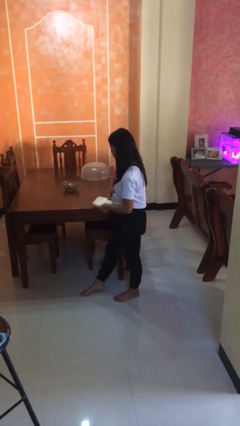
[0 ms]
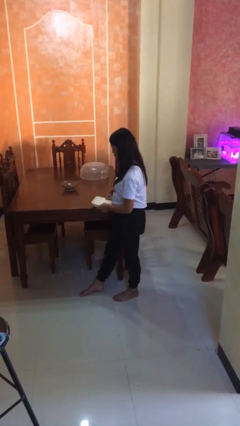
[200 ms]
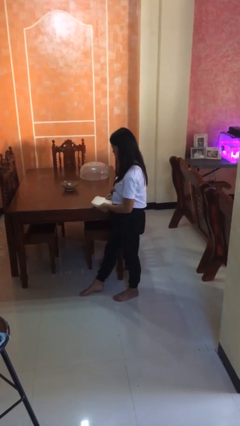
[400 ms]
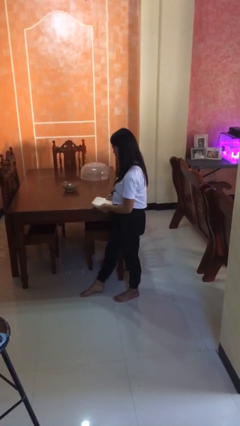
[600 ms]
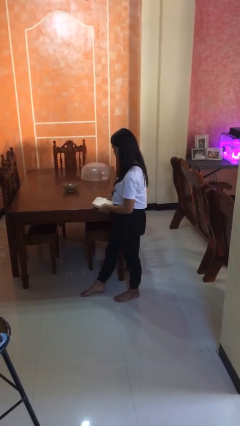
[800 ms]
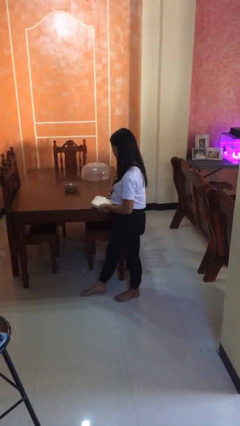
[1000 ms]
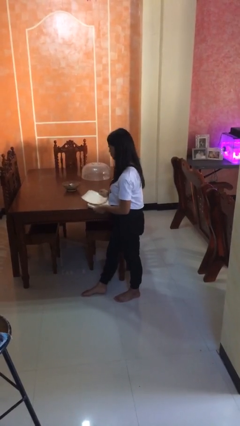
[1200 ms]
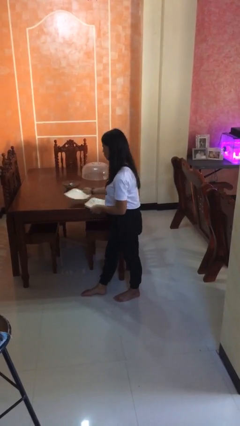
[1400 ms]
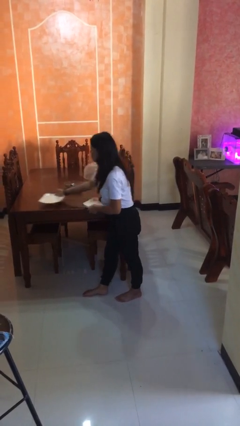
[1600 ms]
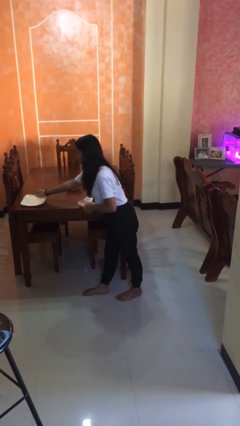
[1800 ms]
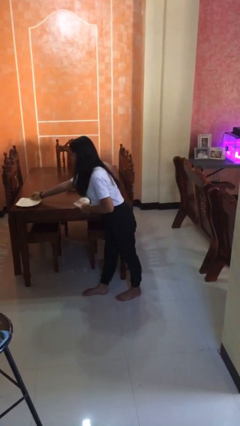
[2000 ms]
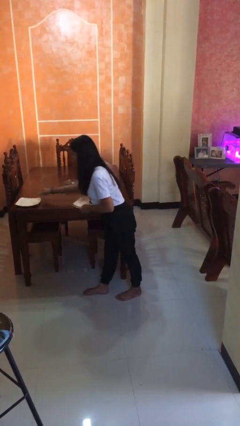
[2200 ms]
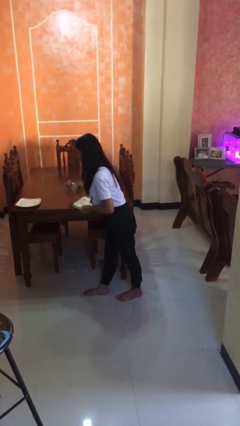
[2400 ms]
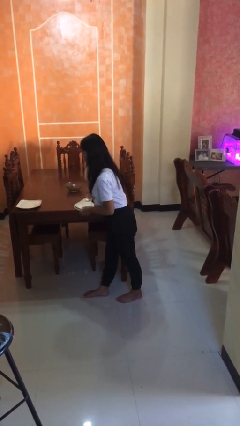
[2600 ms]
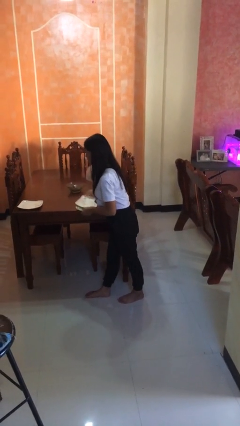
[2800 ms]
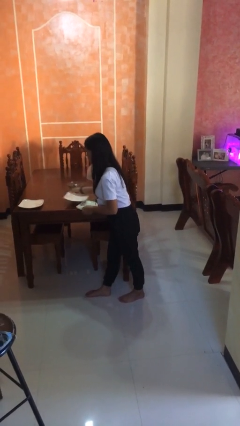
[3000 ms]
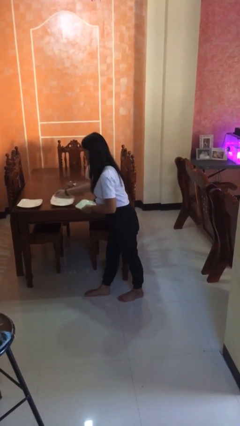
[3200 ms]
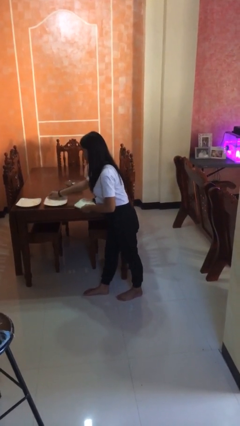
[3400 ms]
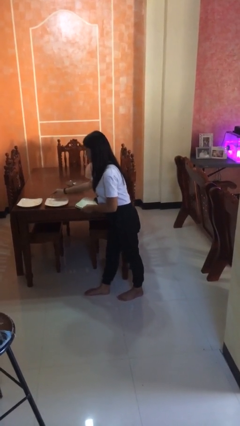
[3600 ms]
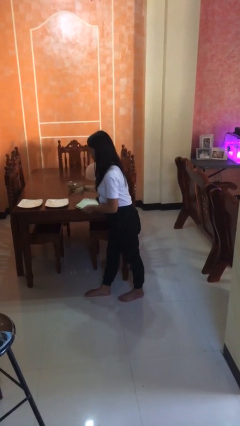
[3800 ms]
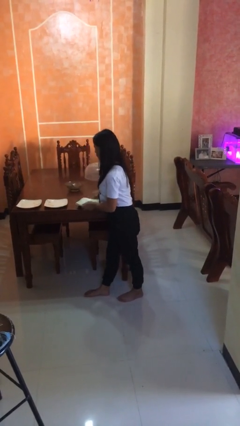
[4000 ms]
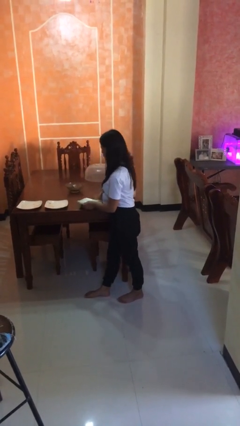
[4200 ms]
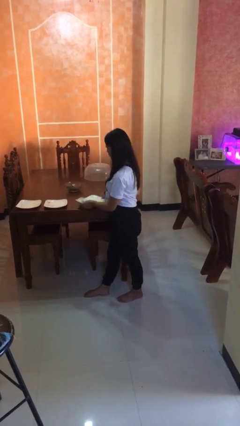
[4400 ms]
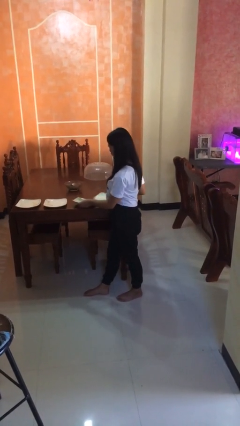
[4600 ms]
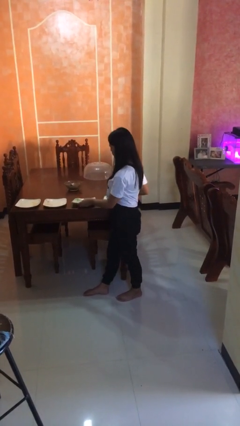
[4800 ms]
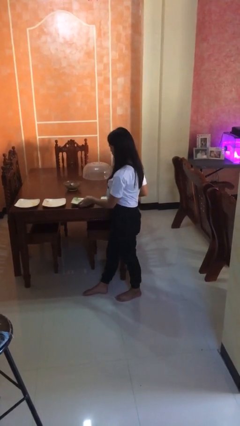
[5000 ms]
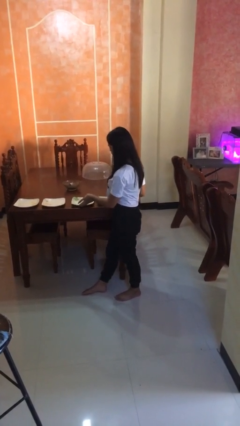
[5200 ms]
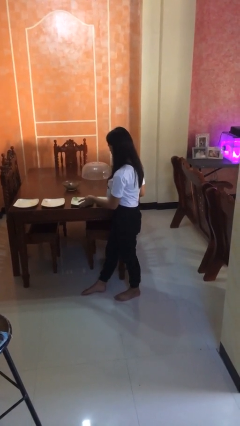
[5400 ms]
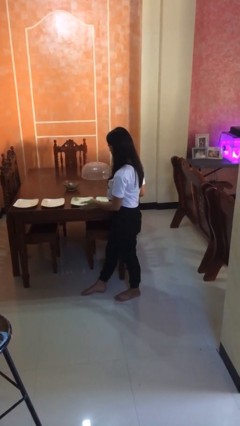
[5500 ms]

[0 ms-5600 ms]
person sets table

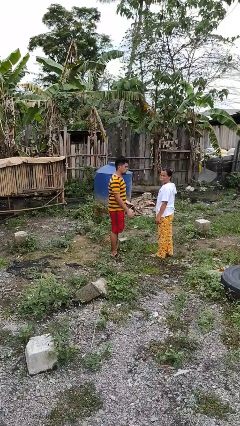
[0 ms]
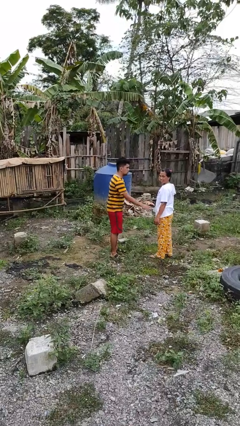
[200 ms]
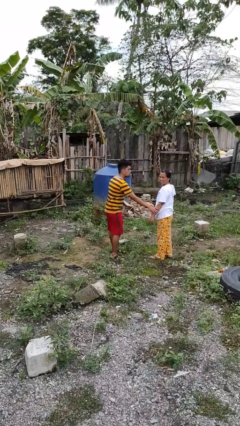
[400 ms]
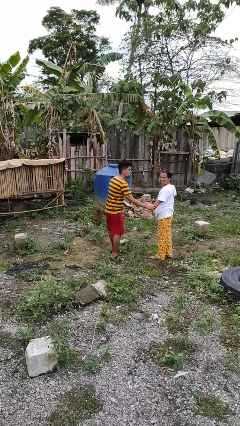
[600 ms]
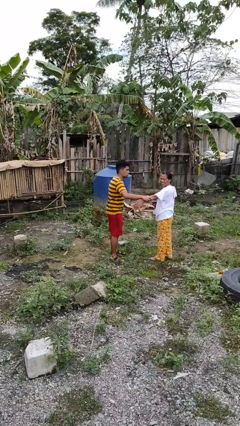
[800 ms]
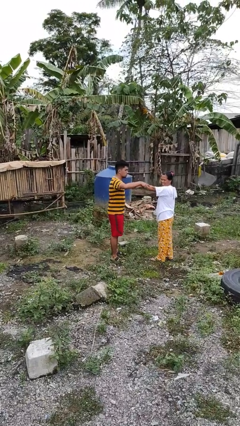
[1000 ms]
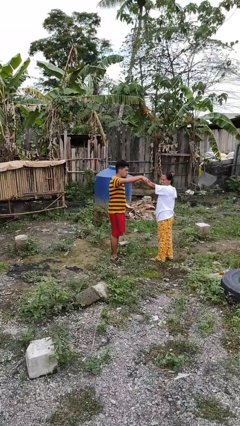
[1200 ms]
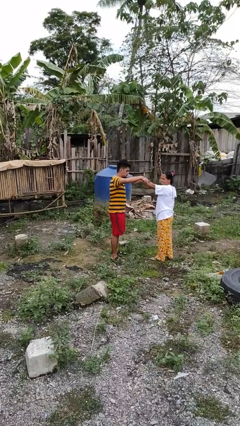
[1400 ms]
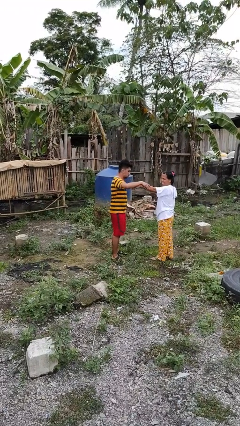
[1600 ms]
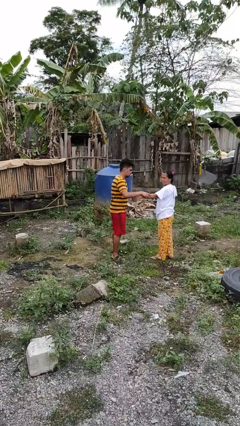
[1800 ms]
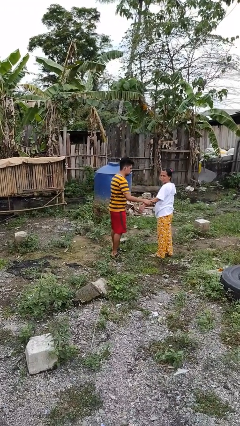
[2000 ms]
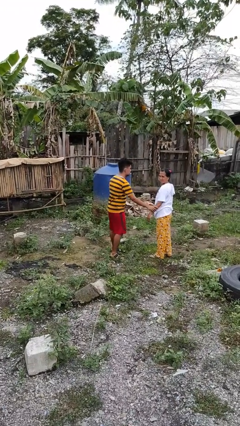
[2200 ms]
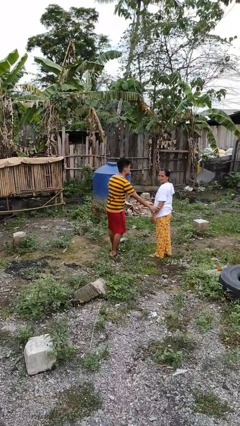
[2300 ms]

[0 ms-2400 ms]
person grabs person by forearm

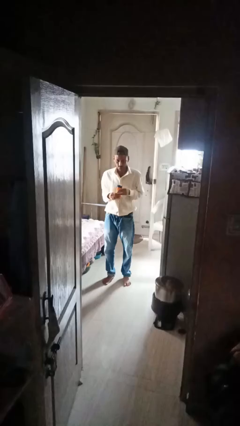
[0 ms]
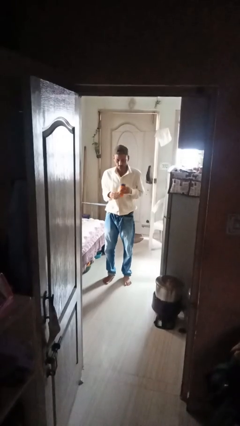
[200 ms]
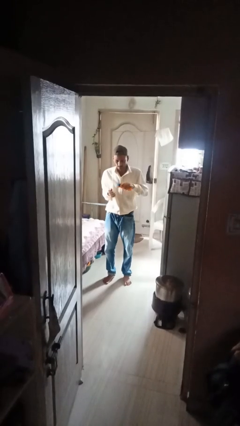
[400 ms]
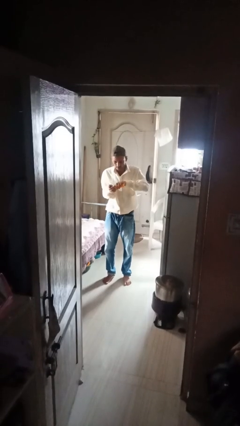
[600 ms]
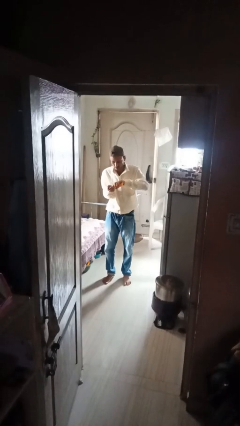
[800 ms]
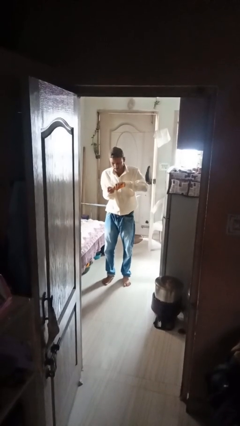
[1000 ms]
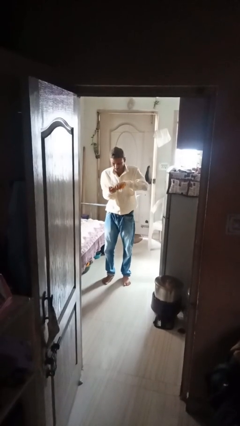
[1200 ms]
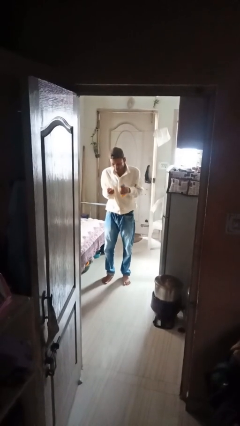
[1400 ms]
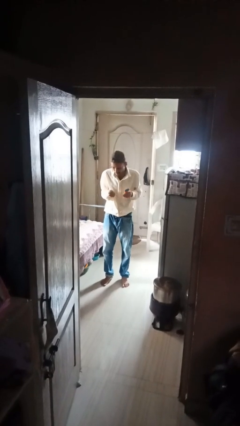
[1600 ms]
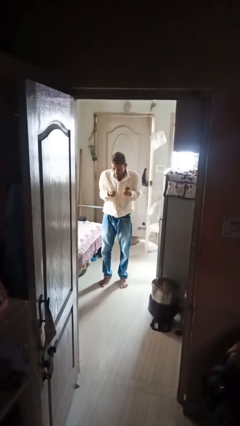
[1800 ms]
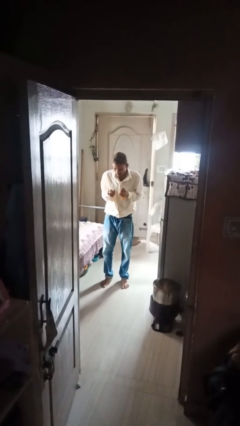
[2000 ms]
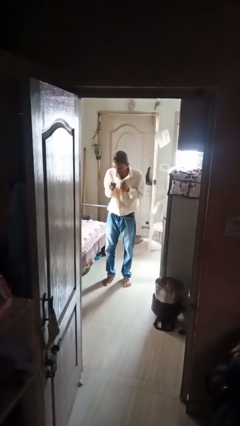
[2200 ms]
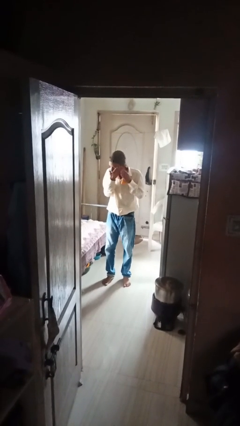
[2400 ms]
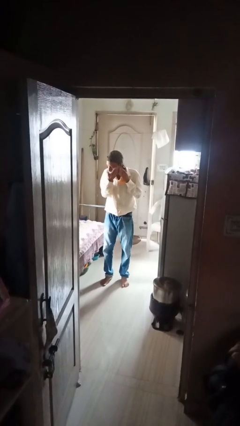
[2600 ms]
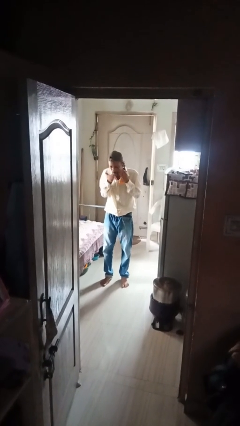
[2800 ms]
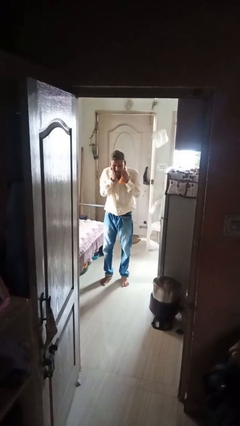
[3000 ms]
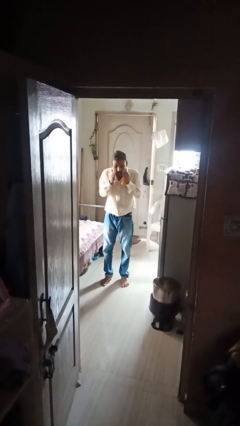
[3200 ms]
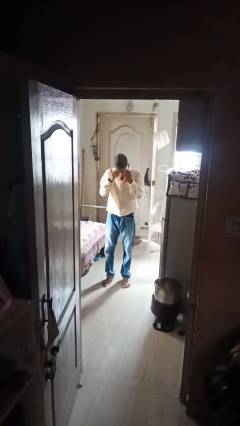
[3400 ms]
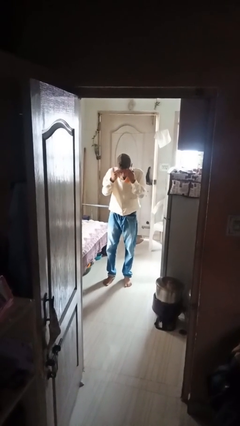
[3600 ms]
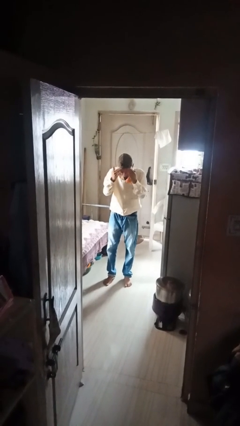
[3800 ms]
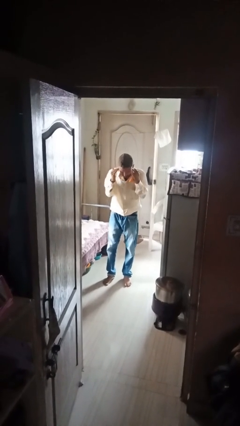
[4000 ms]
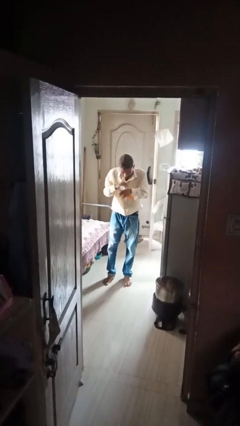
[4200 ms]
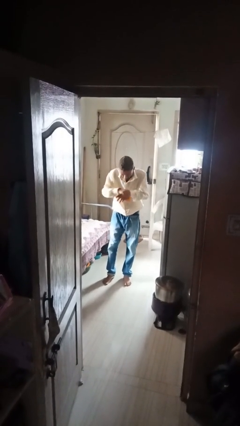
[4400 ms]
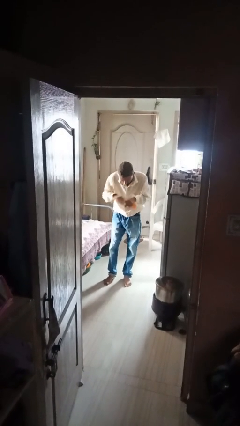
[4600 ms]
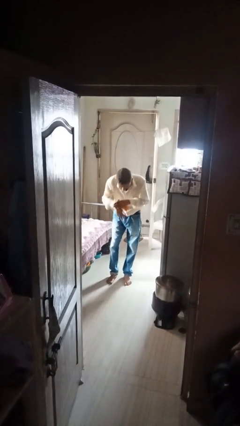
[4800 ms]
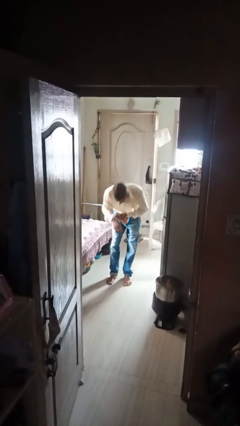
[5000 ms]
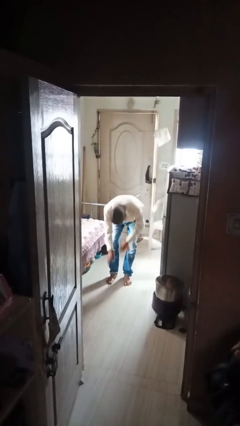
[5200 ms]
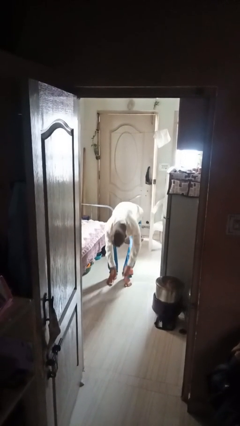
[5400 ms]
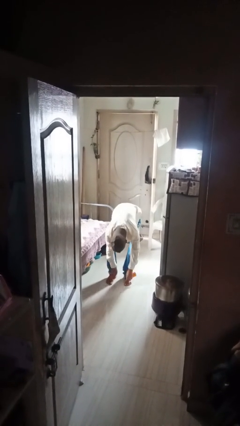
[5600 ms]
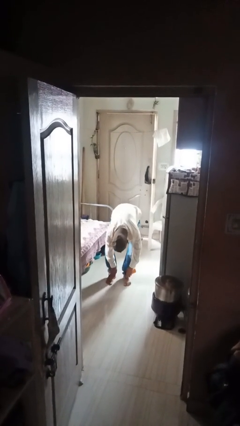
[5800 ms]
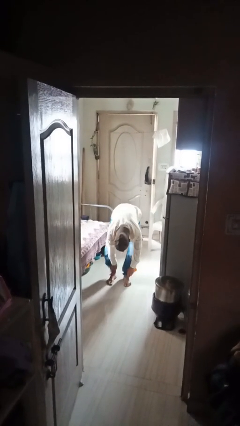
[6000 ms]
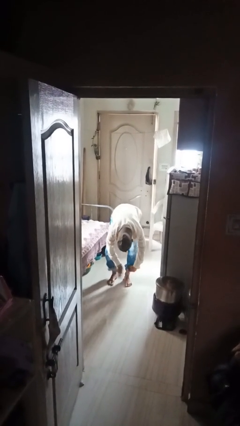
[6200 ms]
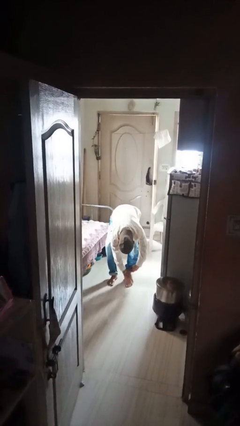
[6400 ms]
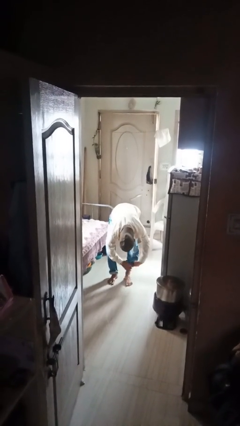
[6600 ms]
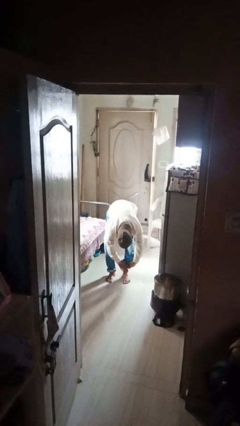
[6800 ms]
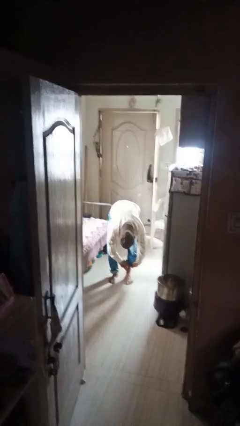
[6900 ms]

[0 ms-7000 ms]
person applies sunscreen

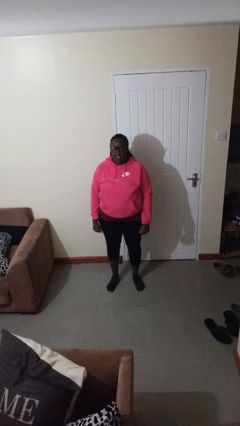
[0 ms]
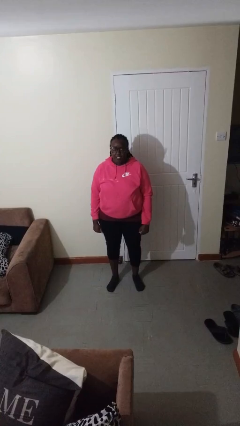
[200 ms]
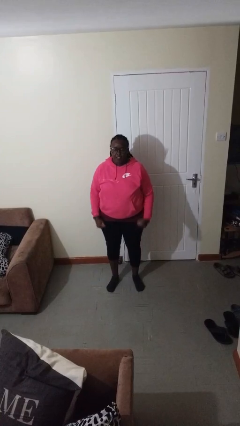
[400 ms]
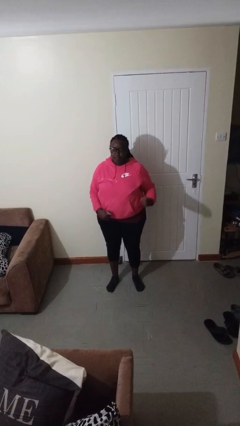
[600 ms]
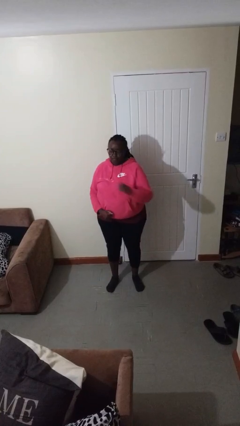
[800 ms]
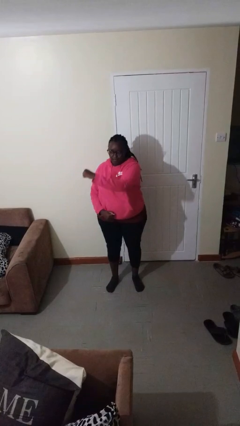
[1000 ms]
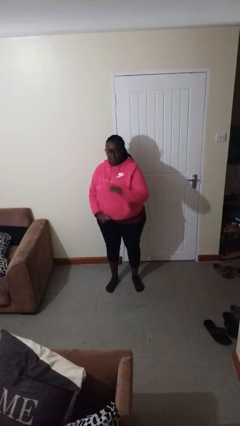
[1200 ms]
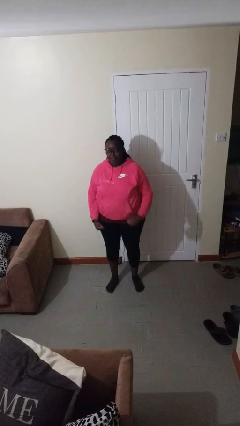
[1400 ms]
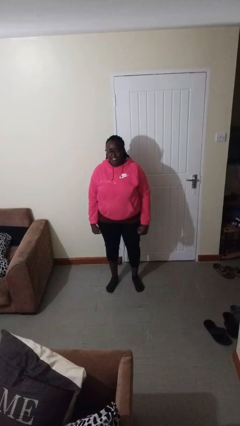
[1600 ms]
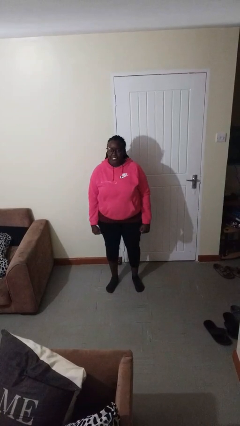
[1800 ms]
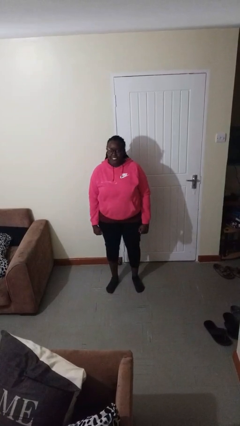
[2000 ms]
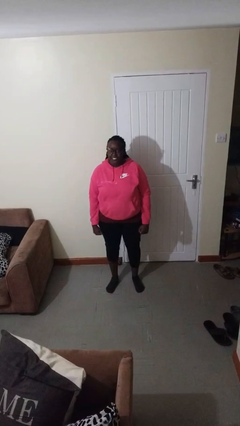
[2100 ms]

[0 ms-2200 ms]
person punches

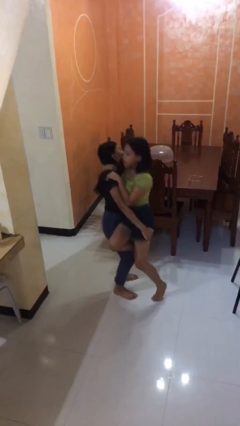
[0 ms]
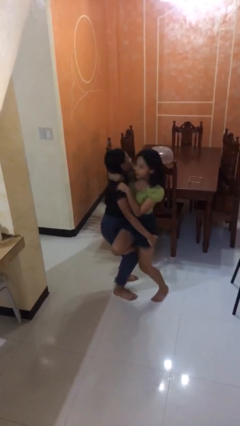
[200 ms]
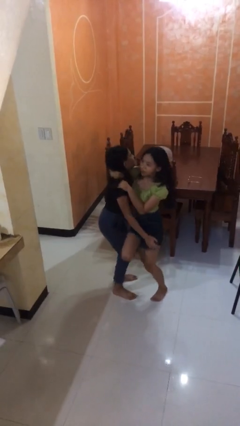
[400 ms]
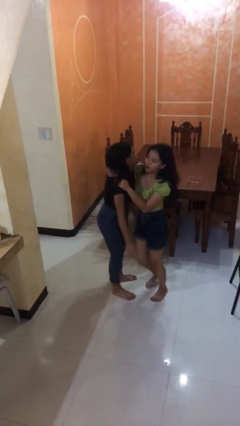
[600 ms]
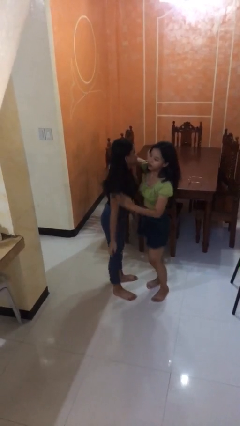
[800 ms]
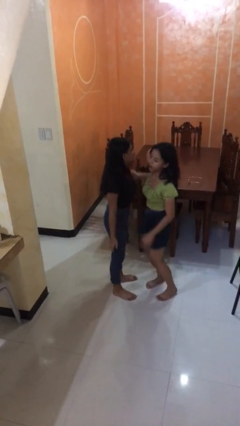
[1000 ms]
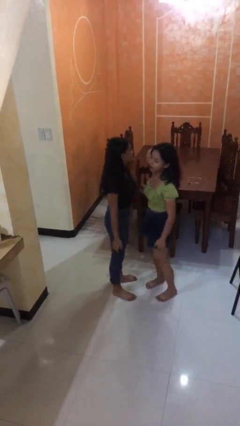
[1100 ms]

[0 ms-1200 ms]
person puts down person
